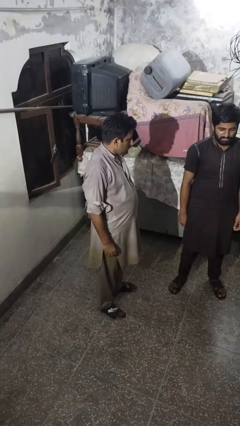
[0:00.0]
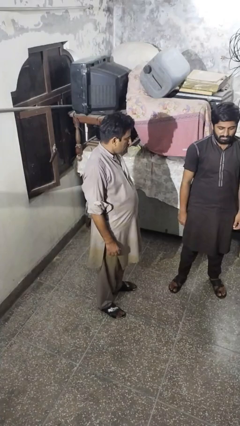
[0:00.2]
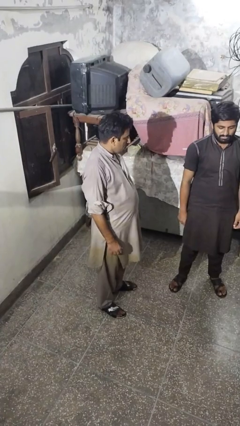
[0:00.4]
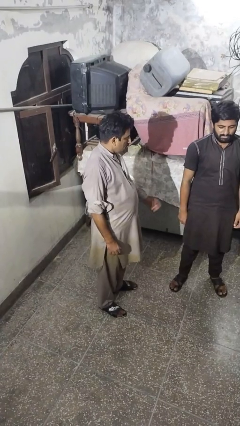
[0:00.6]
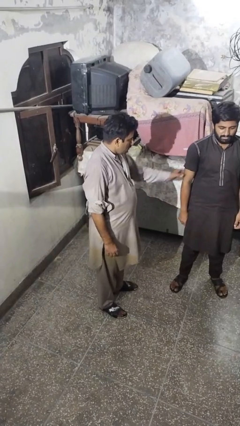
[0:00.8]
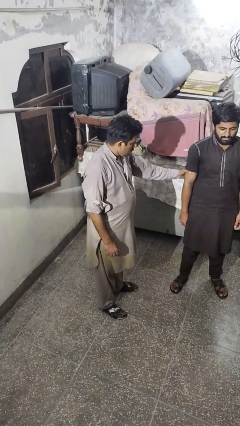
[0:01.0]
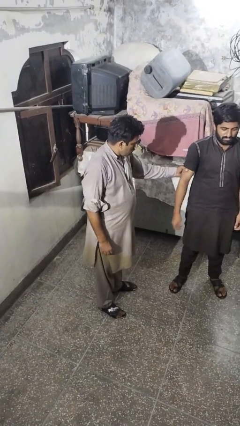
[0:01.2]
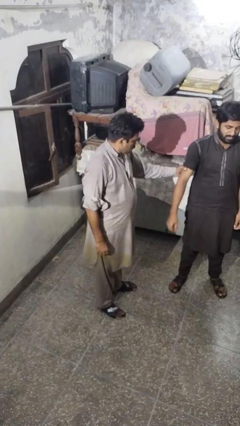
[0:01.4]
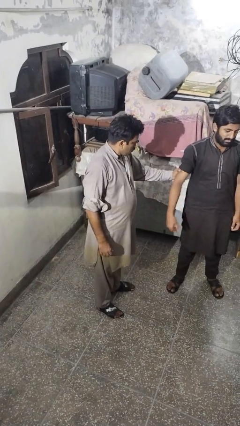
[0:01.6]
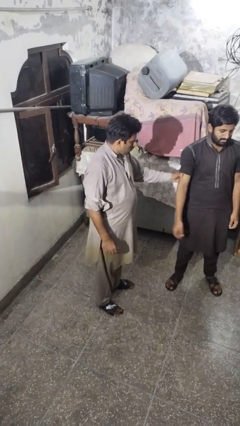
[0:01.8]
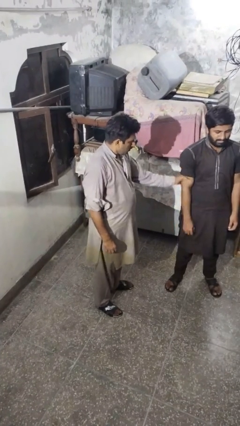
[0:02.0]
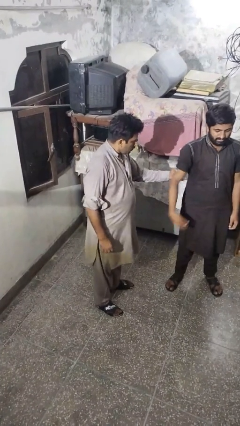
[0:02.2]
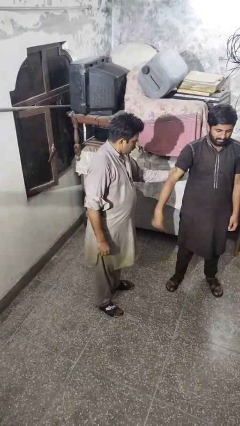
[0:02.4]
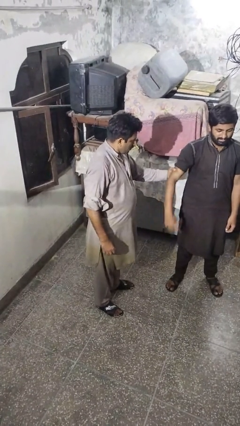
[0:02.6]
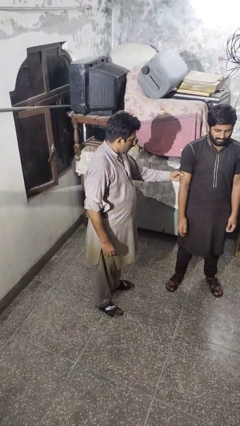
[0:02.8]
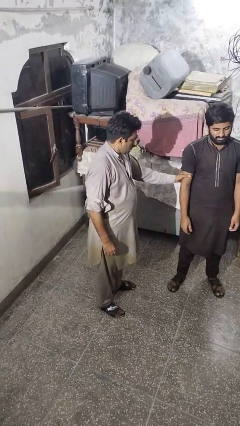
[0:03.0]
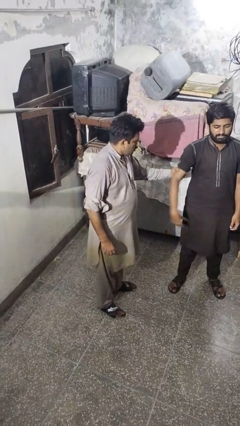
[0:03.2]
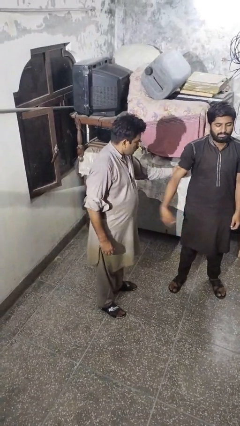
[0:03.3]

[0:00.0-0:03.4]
person grabs person by bicep

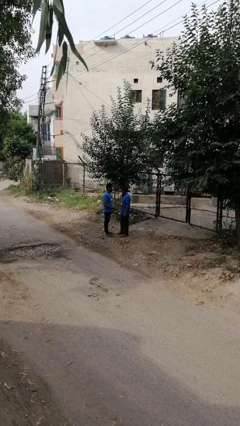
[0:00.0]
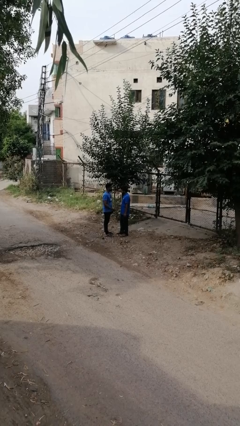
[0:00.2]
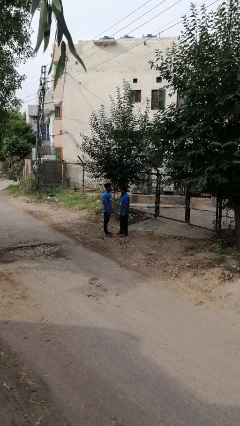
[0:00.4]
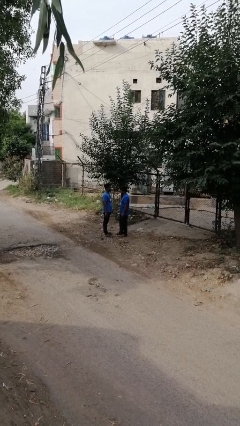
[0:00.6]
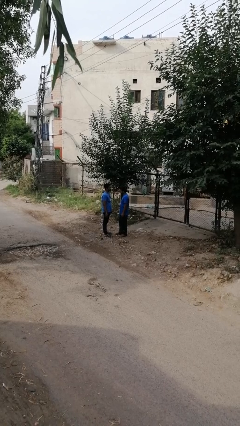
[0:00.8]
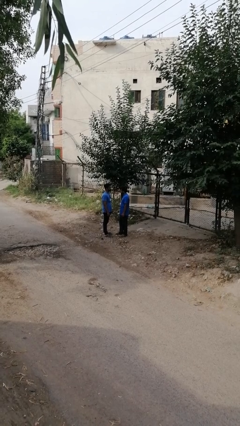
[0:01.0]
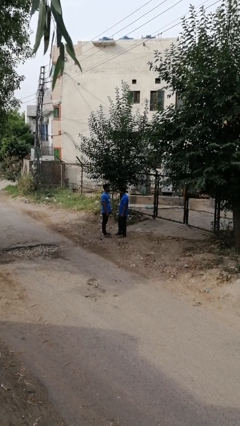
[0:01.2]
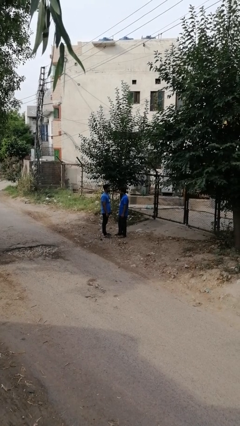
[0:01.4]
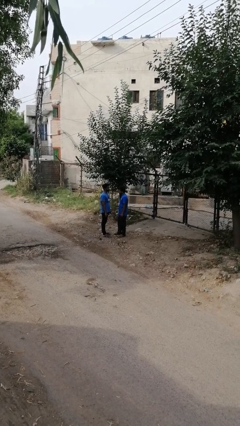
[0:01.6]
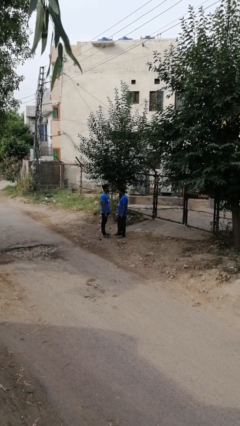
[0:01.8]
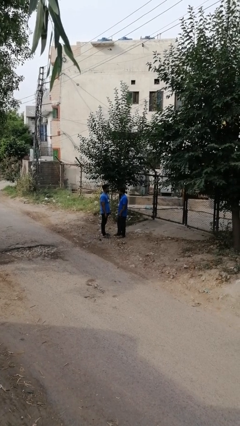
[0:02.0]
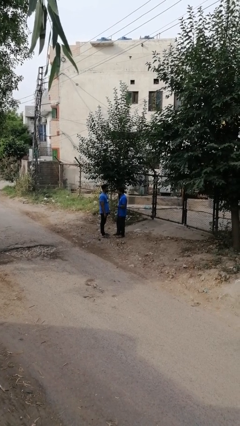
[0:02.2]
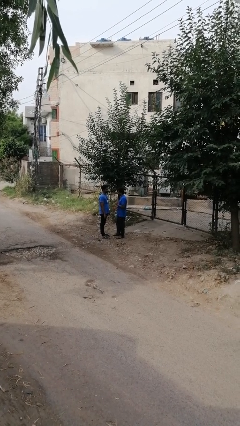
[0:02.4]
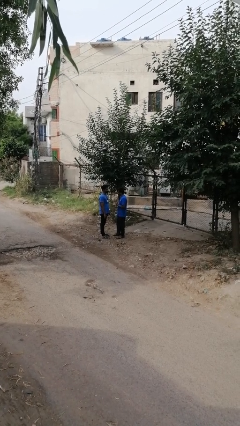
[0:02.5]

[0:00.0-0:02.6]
person highfives hand

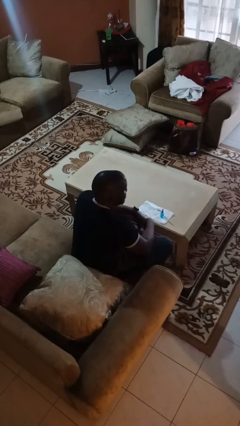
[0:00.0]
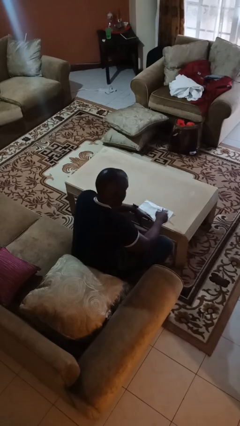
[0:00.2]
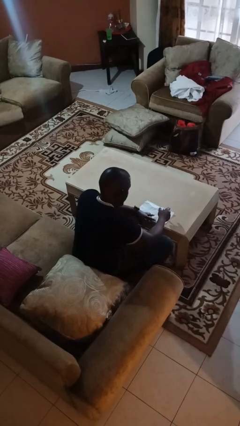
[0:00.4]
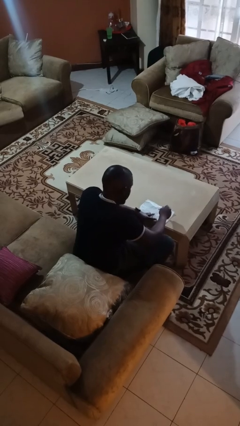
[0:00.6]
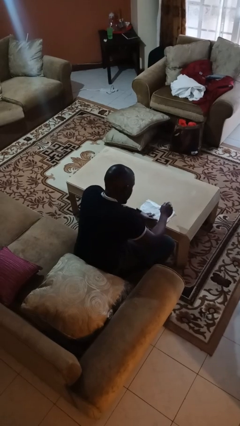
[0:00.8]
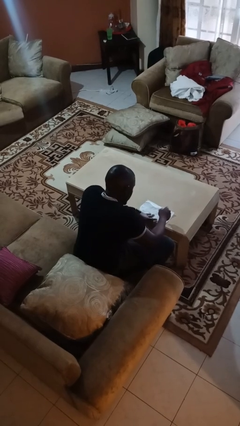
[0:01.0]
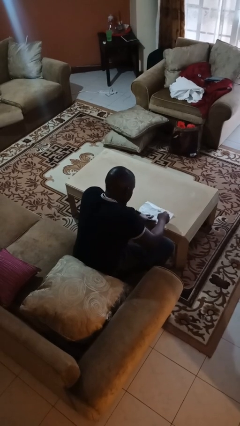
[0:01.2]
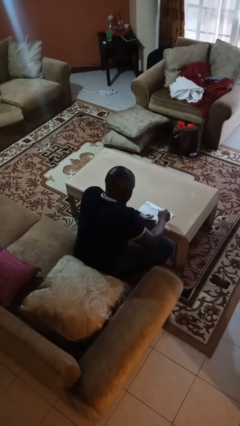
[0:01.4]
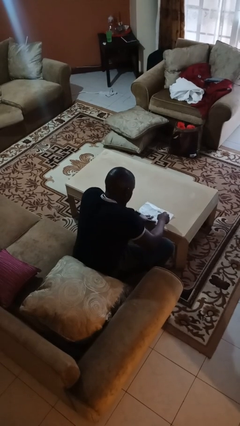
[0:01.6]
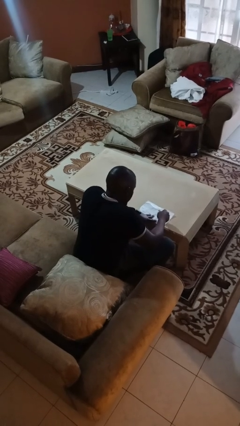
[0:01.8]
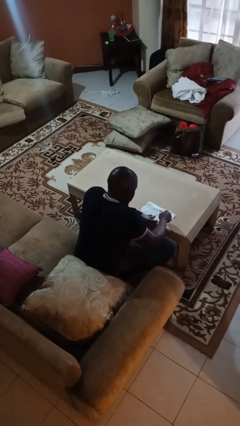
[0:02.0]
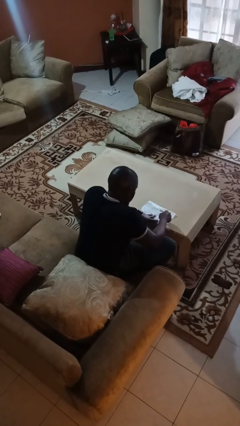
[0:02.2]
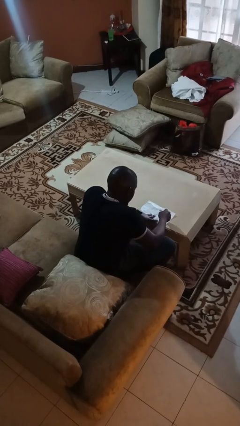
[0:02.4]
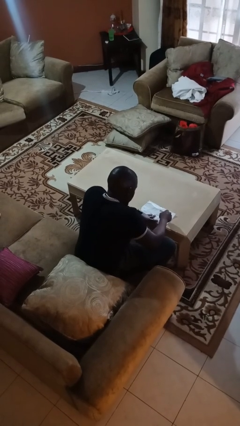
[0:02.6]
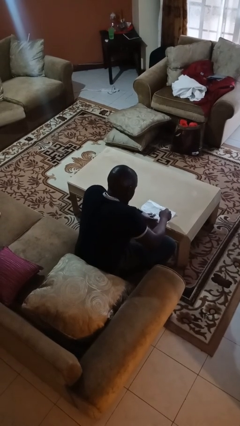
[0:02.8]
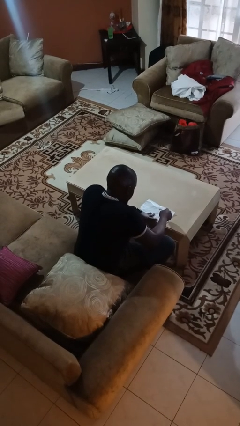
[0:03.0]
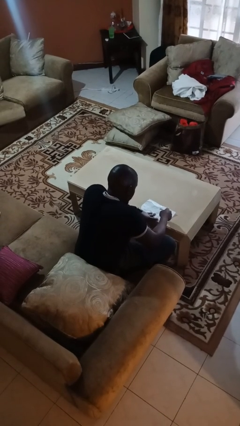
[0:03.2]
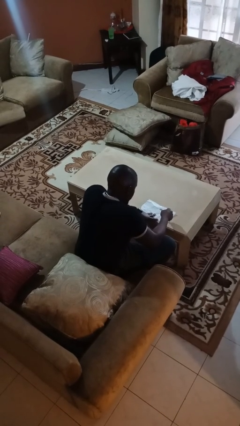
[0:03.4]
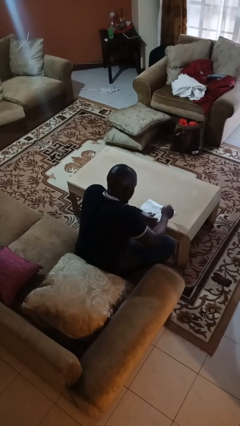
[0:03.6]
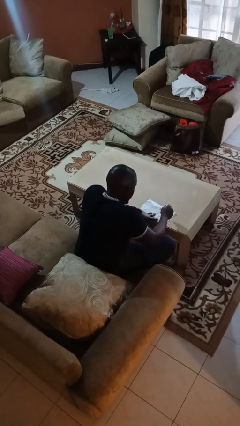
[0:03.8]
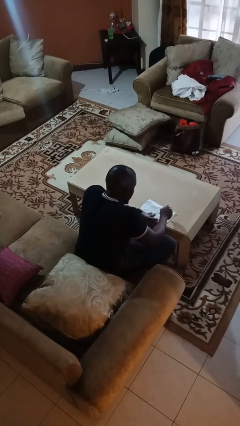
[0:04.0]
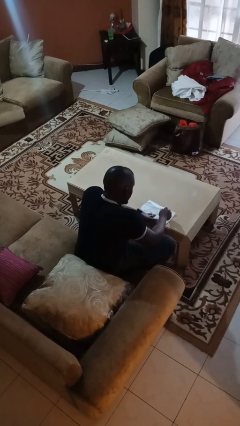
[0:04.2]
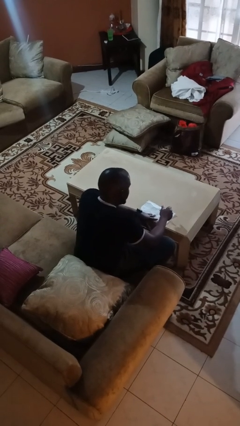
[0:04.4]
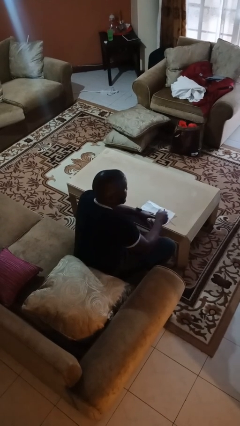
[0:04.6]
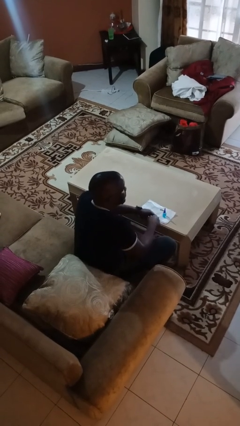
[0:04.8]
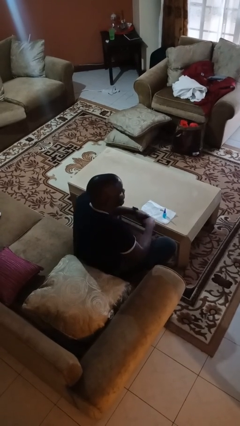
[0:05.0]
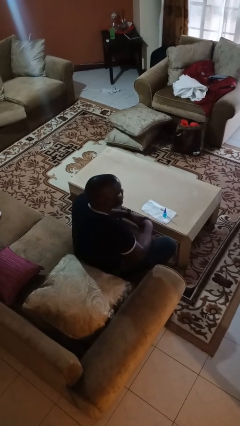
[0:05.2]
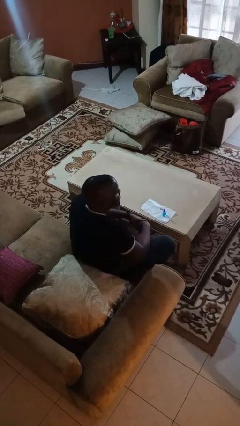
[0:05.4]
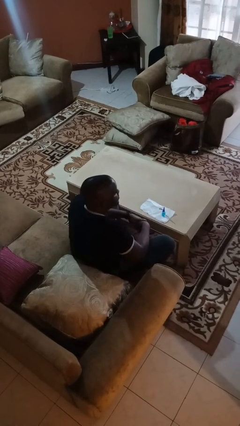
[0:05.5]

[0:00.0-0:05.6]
person paints fingernails

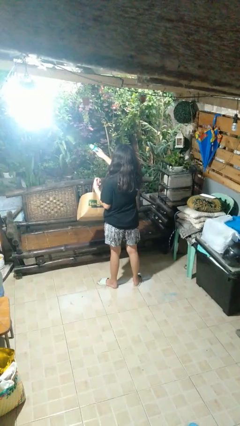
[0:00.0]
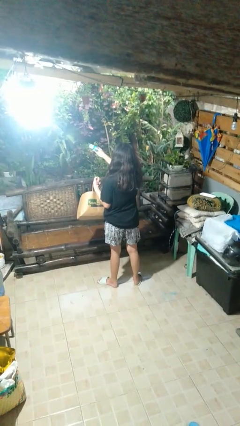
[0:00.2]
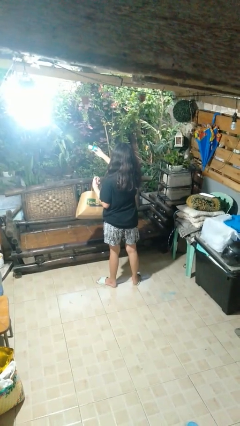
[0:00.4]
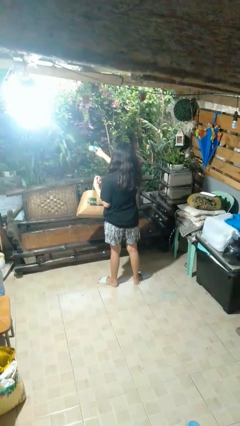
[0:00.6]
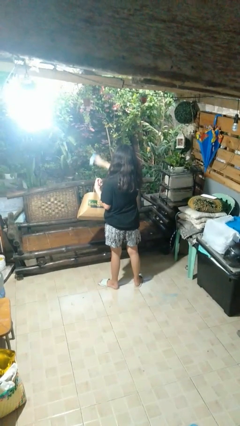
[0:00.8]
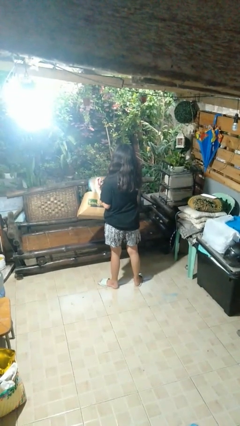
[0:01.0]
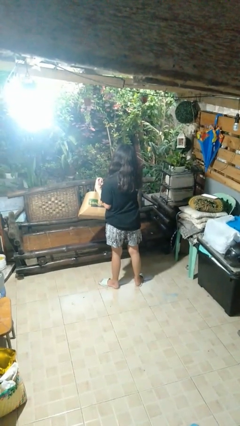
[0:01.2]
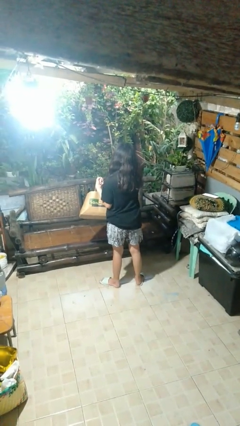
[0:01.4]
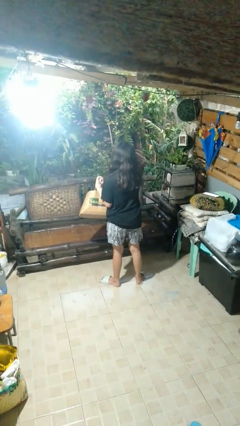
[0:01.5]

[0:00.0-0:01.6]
person puts object into bag

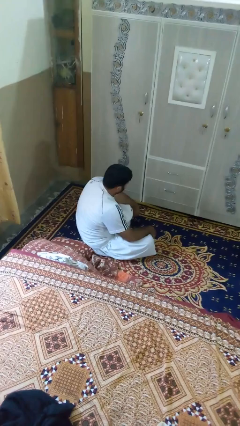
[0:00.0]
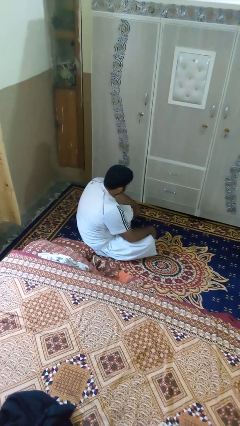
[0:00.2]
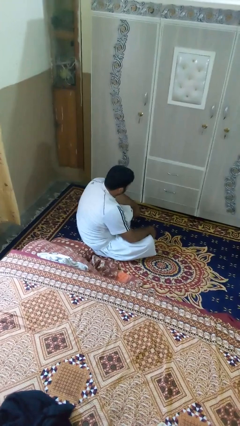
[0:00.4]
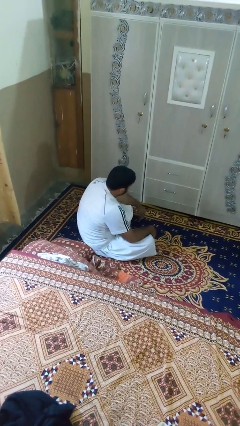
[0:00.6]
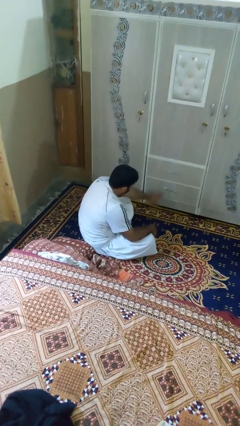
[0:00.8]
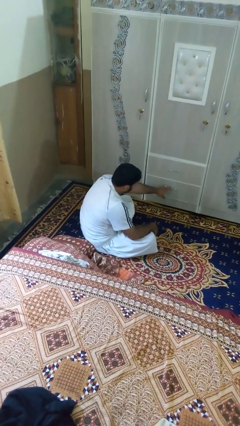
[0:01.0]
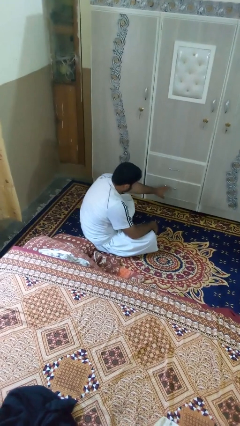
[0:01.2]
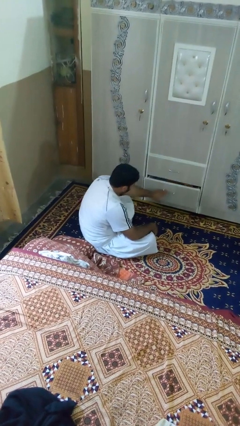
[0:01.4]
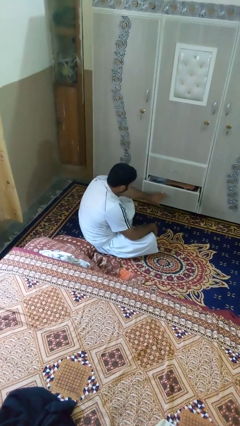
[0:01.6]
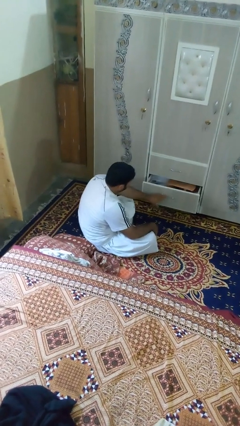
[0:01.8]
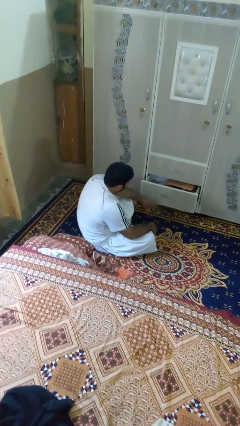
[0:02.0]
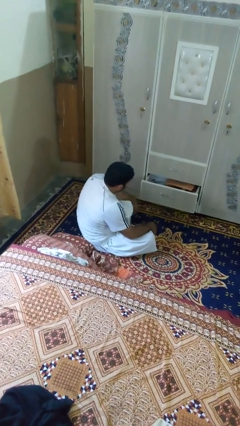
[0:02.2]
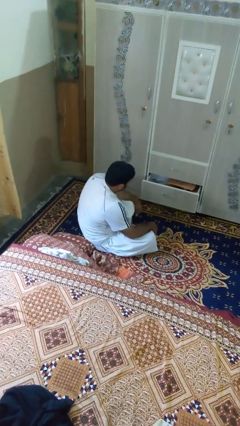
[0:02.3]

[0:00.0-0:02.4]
person opens dresser drawer

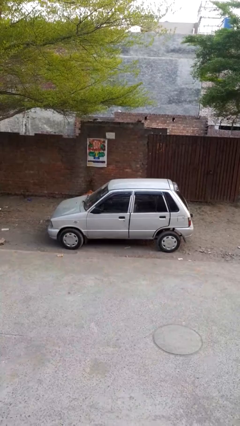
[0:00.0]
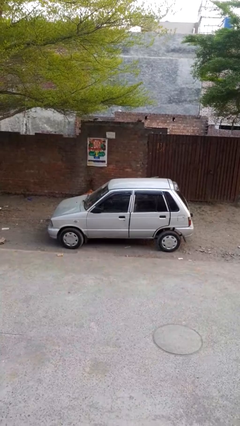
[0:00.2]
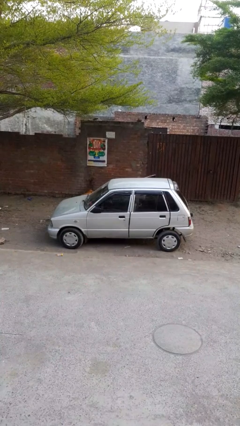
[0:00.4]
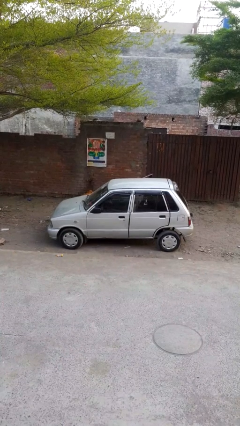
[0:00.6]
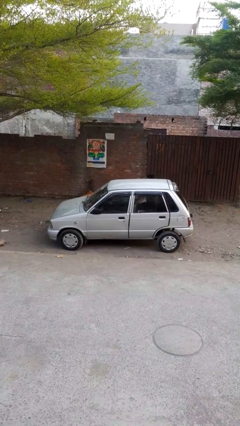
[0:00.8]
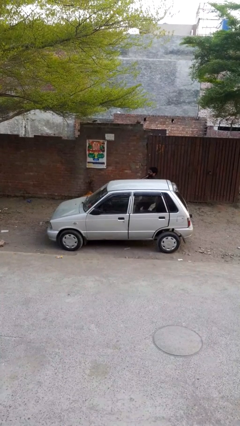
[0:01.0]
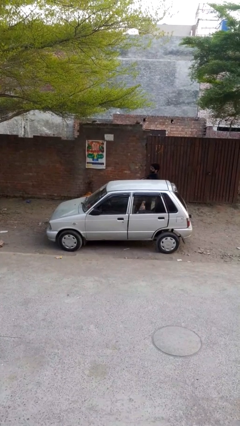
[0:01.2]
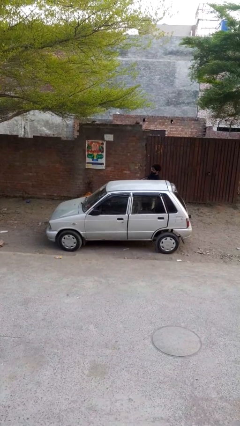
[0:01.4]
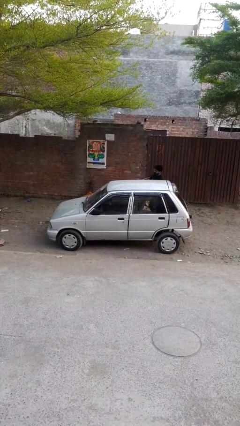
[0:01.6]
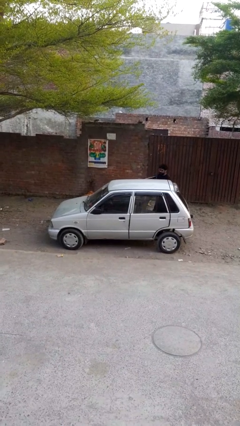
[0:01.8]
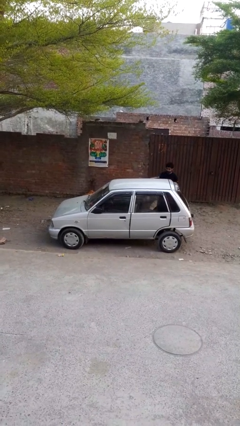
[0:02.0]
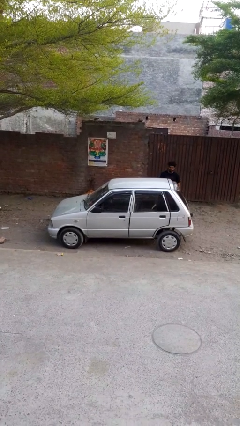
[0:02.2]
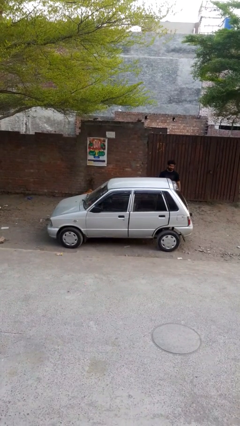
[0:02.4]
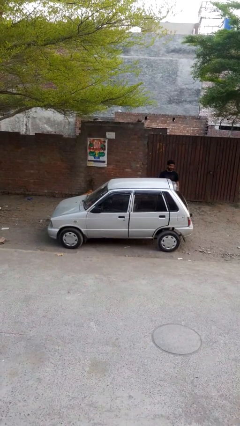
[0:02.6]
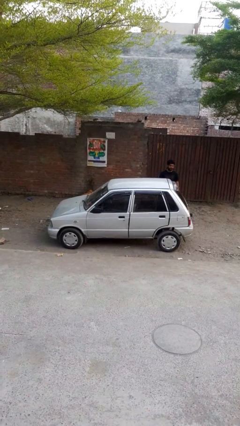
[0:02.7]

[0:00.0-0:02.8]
car drops off person
